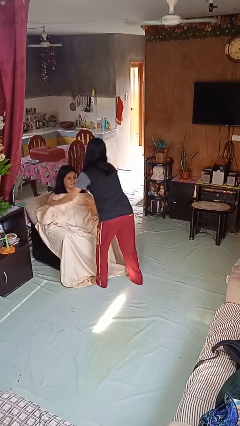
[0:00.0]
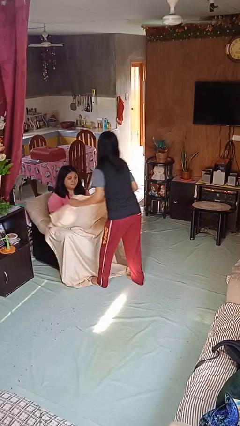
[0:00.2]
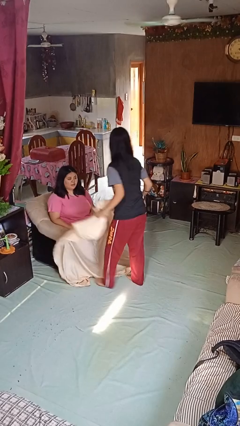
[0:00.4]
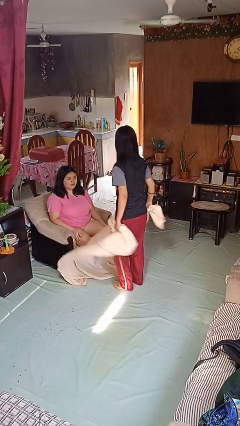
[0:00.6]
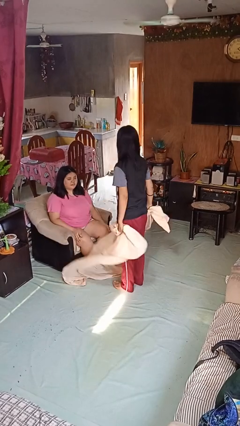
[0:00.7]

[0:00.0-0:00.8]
person uncovers friend with blanket

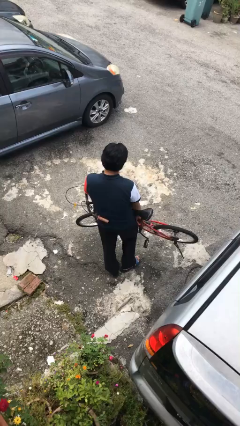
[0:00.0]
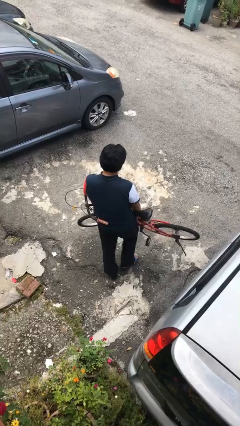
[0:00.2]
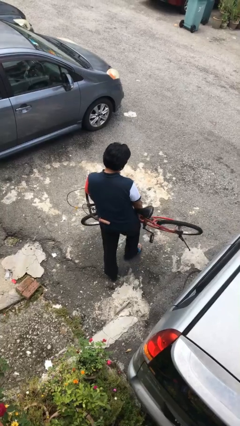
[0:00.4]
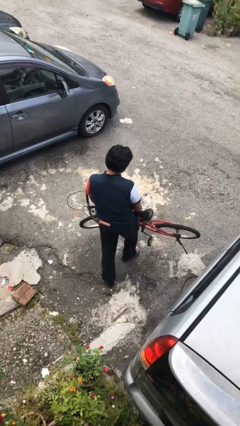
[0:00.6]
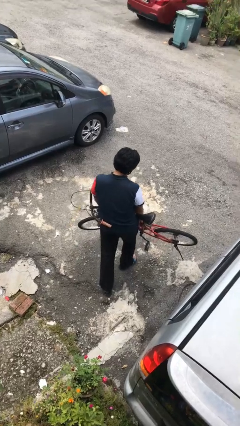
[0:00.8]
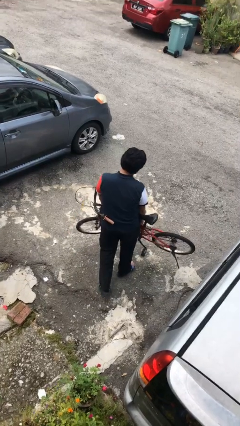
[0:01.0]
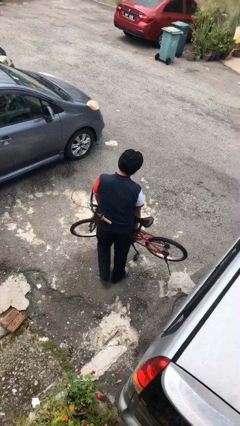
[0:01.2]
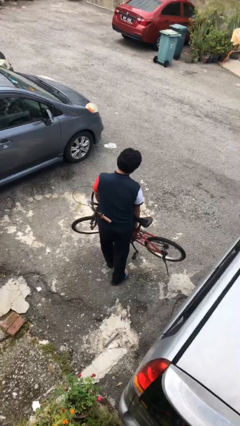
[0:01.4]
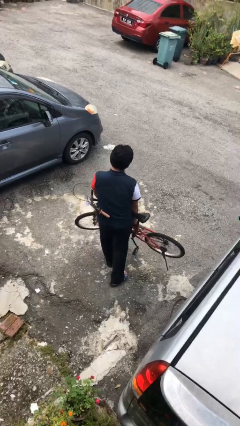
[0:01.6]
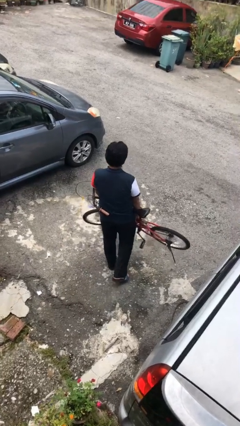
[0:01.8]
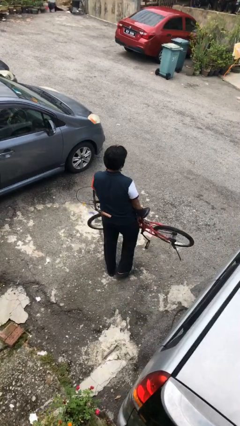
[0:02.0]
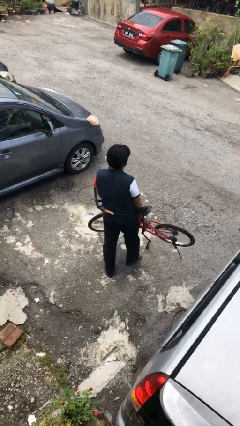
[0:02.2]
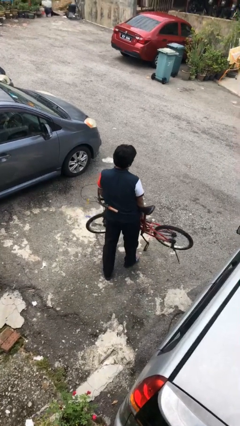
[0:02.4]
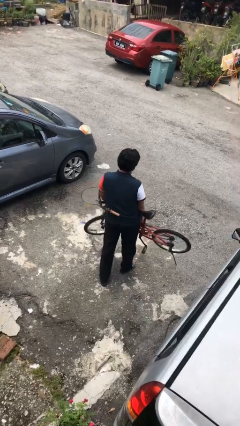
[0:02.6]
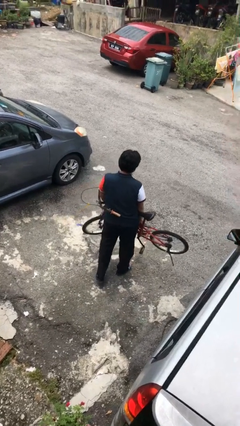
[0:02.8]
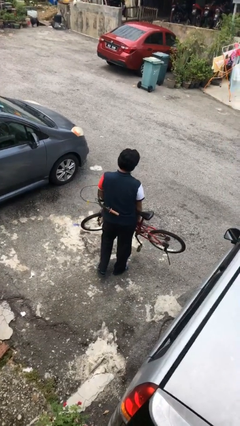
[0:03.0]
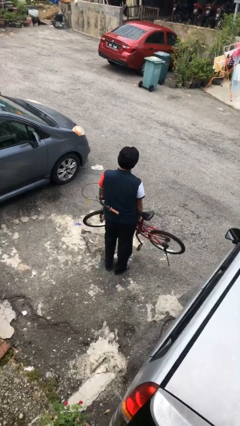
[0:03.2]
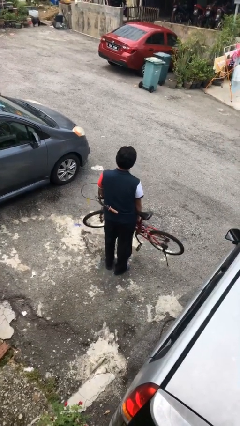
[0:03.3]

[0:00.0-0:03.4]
person carries bicycle

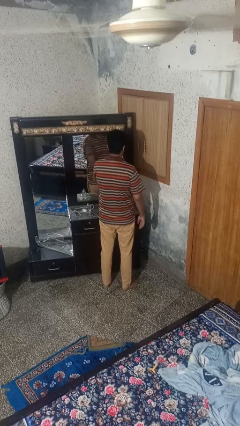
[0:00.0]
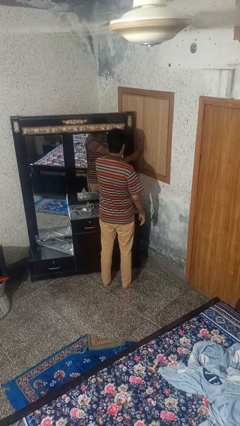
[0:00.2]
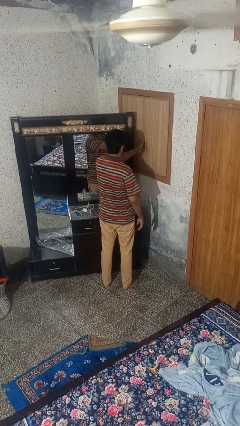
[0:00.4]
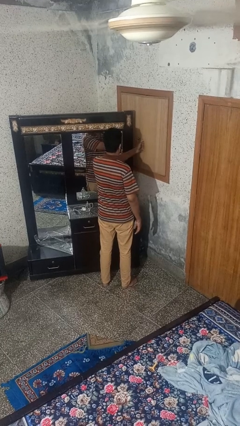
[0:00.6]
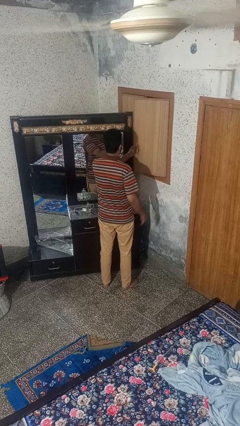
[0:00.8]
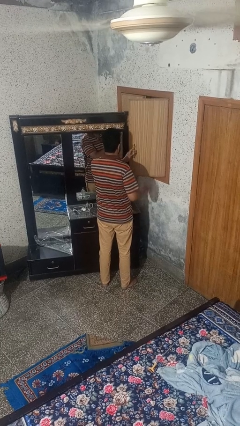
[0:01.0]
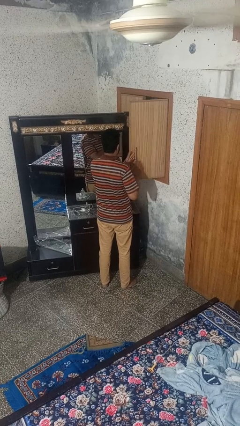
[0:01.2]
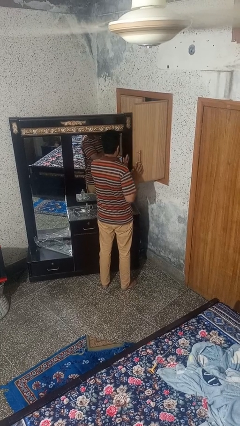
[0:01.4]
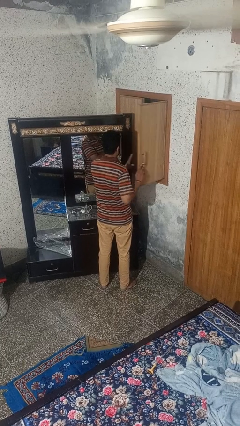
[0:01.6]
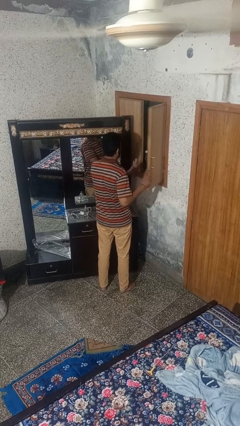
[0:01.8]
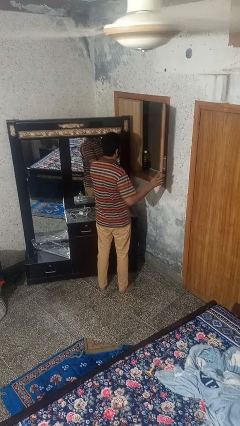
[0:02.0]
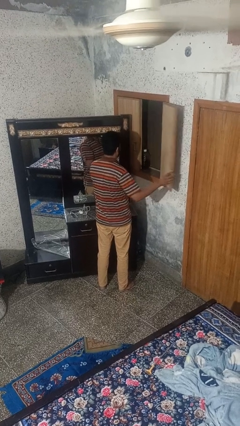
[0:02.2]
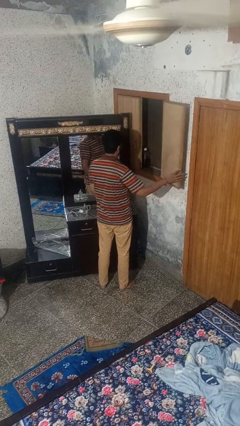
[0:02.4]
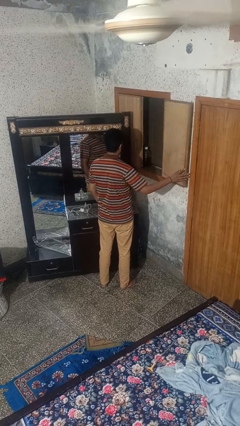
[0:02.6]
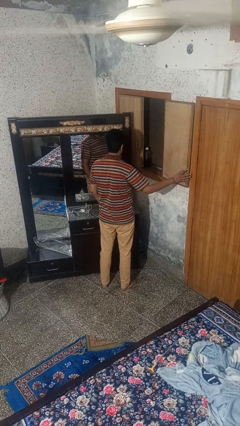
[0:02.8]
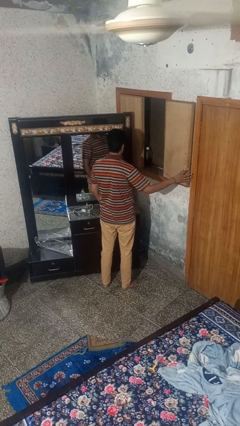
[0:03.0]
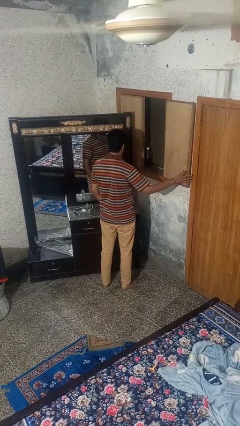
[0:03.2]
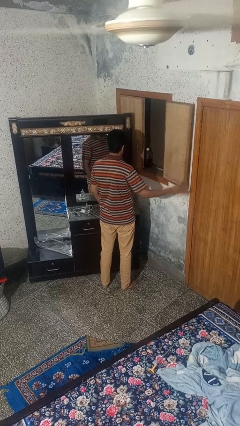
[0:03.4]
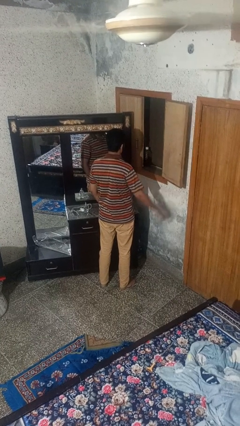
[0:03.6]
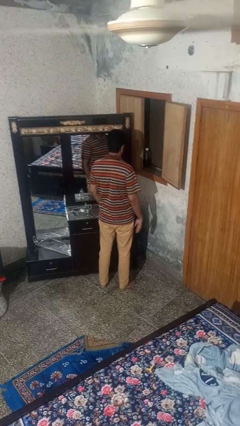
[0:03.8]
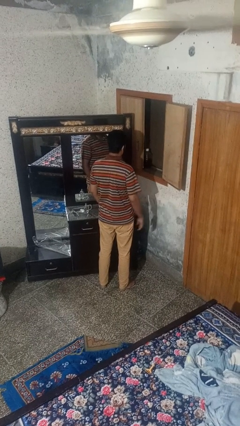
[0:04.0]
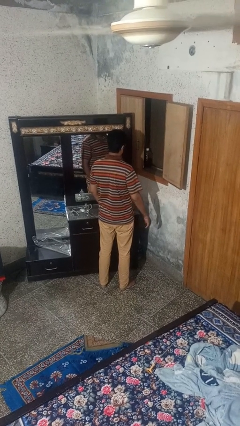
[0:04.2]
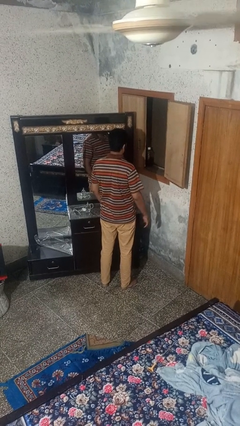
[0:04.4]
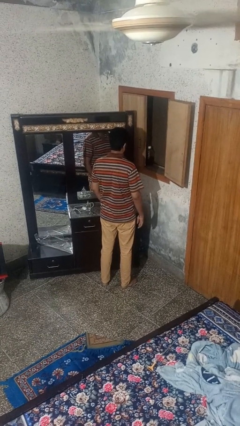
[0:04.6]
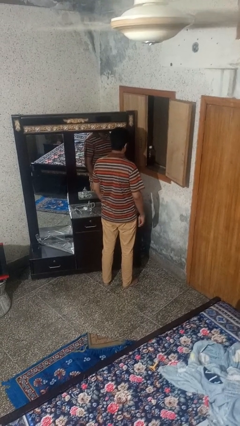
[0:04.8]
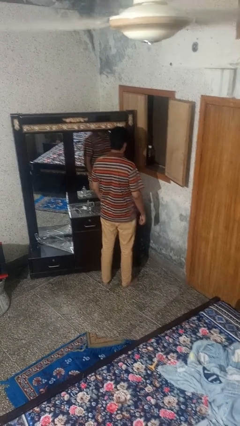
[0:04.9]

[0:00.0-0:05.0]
person opens home window

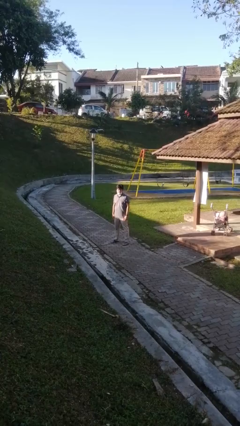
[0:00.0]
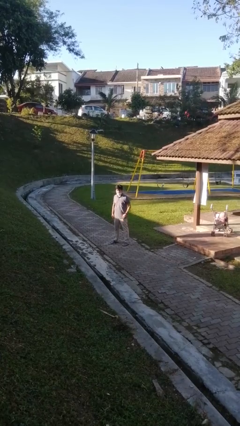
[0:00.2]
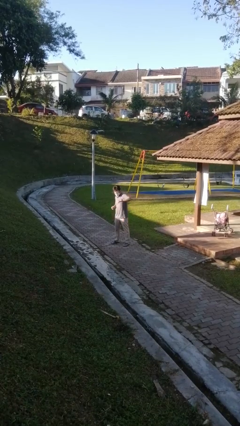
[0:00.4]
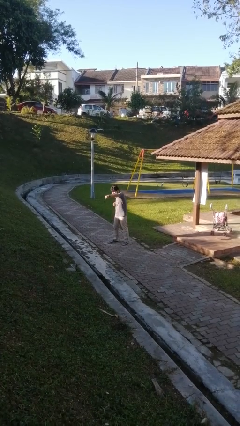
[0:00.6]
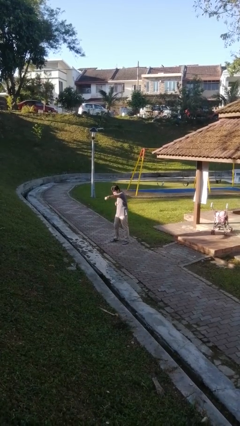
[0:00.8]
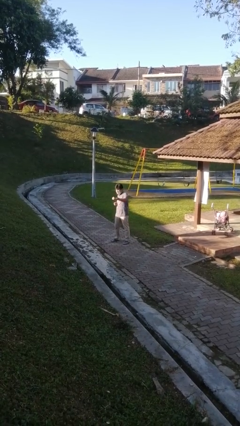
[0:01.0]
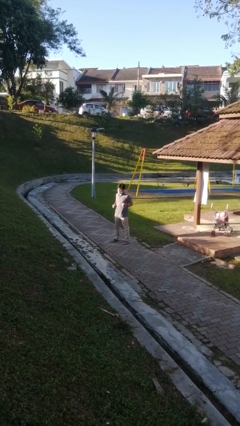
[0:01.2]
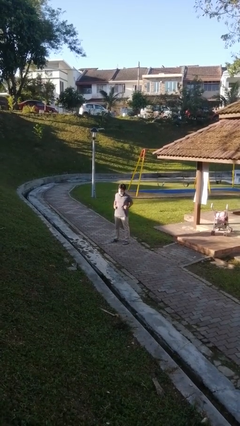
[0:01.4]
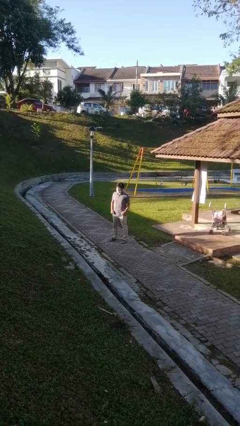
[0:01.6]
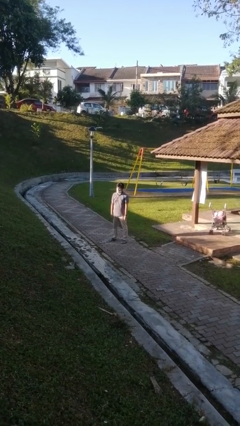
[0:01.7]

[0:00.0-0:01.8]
person punches

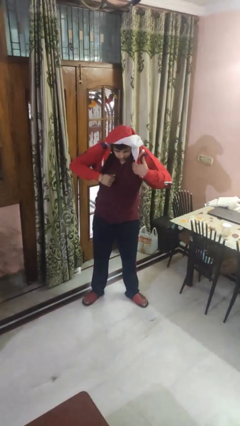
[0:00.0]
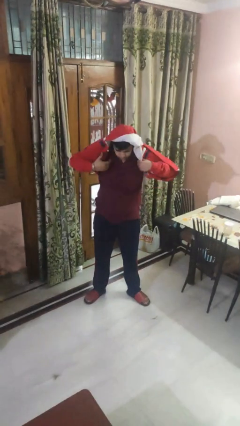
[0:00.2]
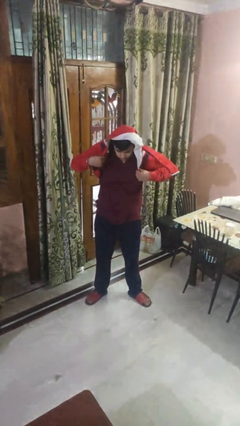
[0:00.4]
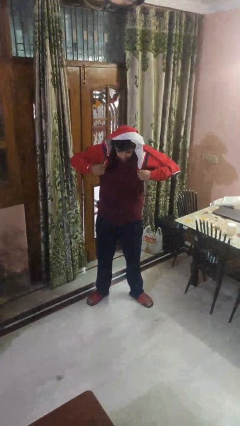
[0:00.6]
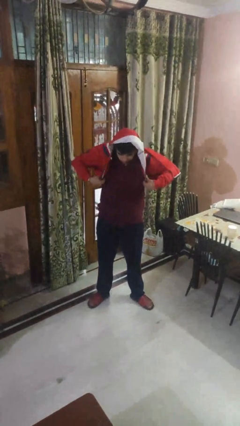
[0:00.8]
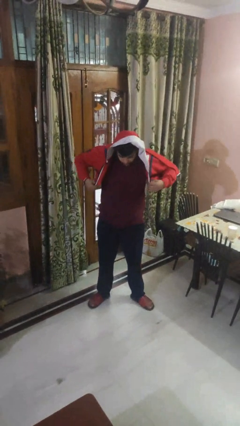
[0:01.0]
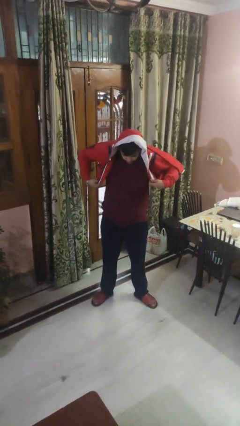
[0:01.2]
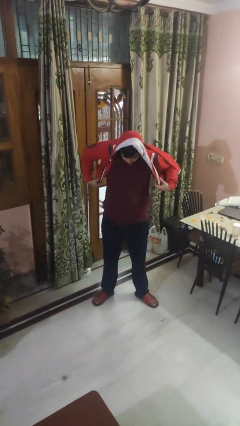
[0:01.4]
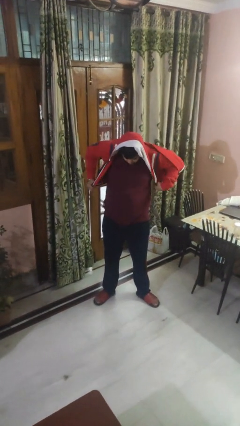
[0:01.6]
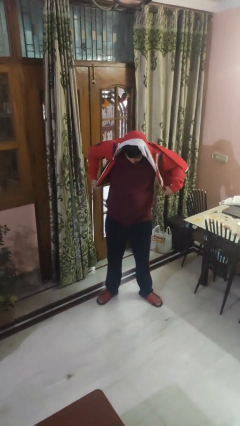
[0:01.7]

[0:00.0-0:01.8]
person puts on hoodie

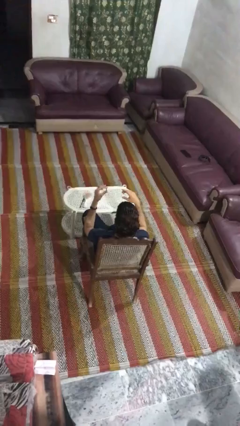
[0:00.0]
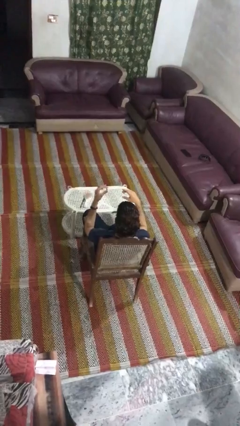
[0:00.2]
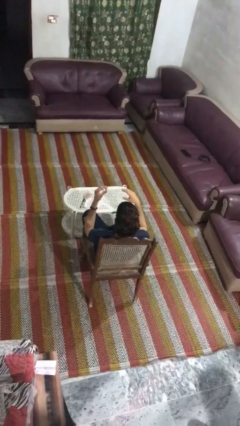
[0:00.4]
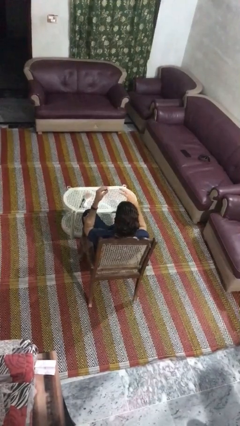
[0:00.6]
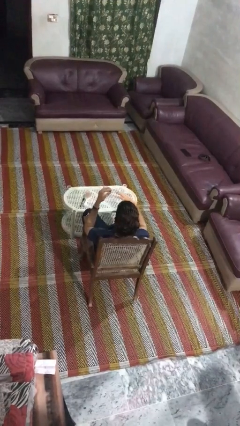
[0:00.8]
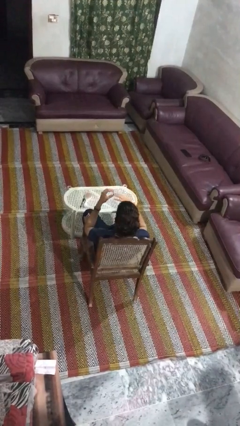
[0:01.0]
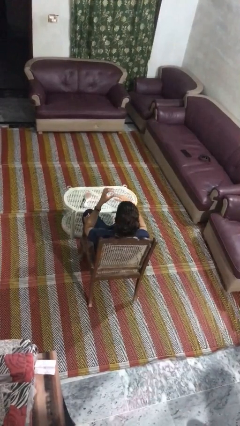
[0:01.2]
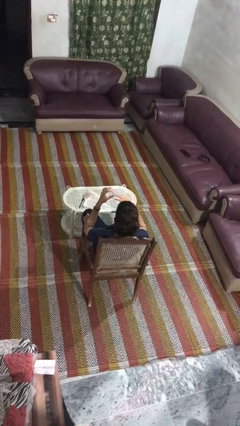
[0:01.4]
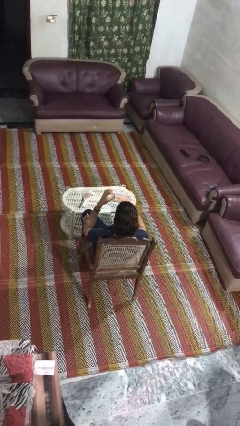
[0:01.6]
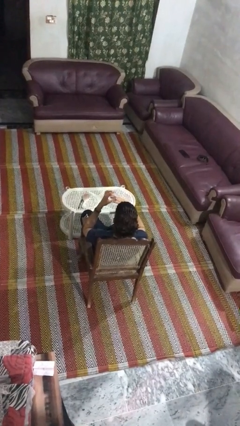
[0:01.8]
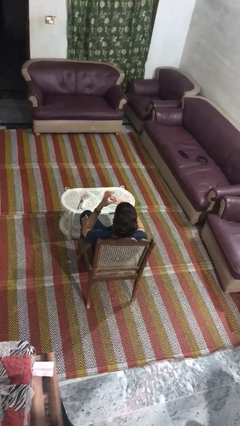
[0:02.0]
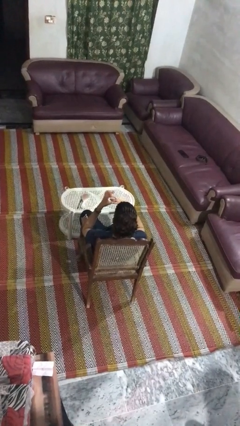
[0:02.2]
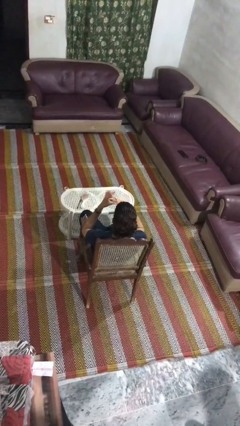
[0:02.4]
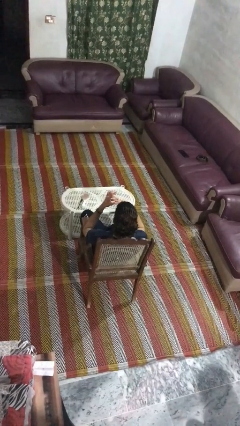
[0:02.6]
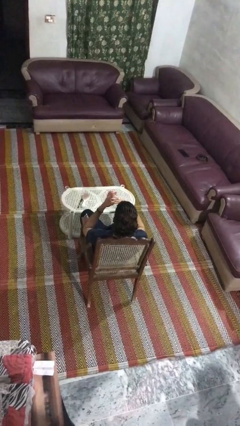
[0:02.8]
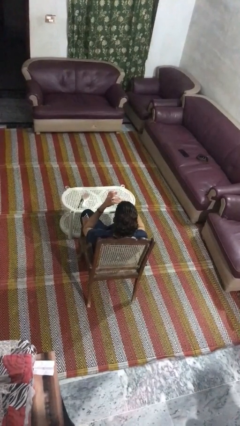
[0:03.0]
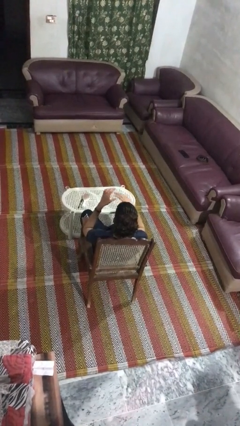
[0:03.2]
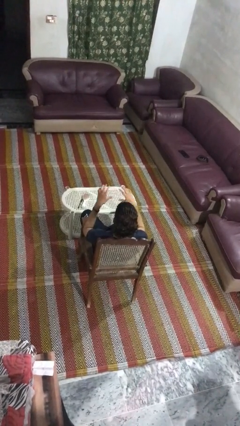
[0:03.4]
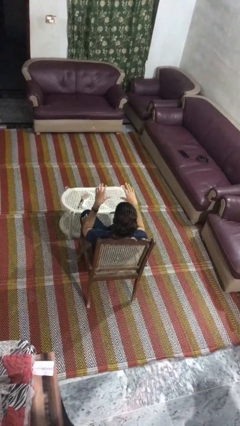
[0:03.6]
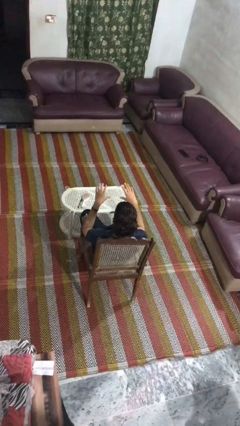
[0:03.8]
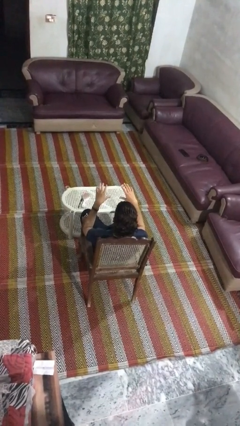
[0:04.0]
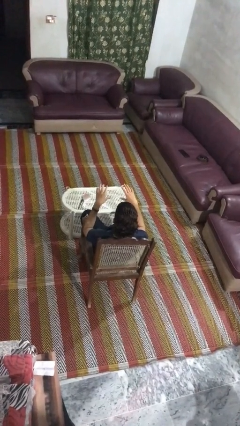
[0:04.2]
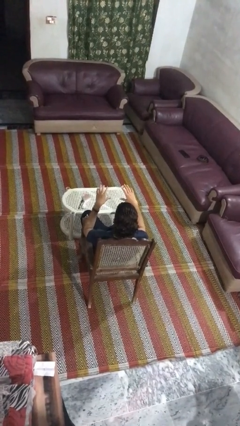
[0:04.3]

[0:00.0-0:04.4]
person puts on ring

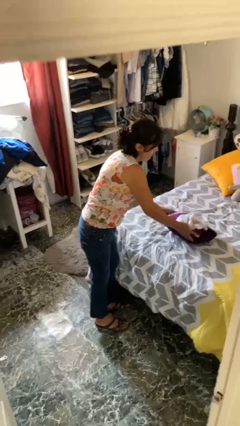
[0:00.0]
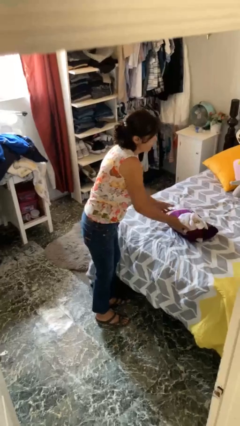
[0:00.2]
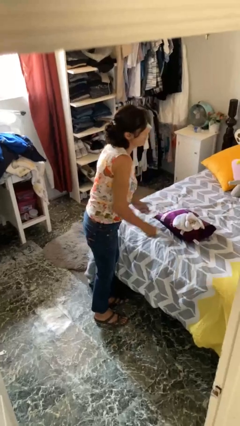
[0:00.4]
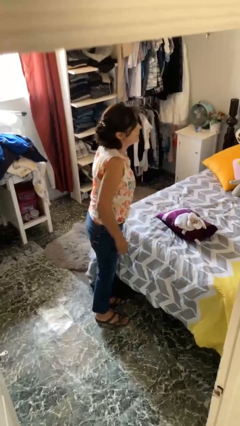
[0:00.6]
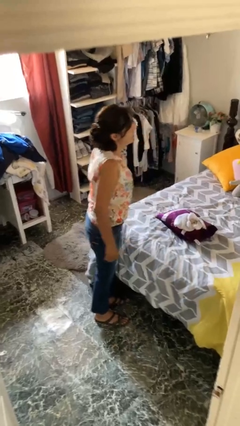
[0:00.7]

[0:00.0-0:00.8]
person puts down object on bed
